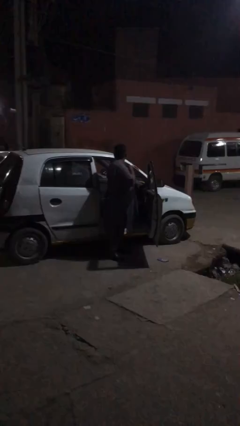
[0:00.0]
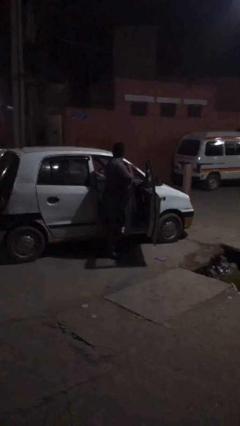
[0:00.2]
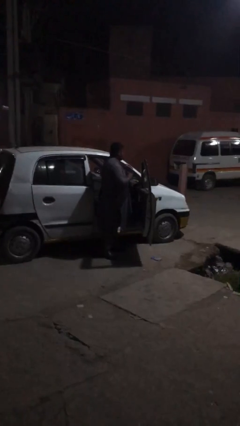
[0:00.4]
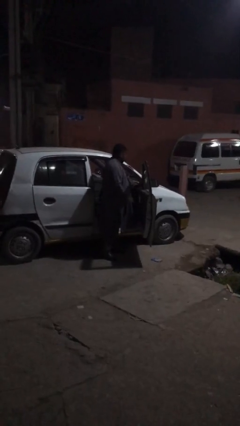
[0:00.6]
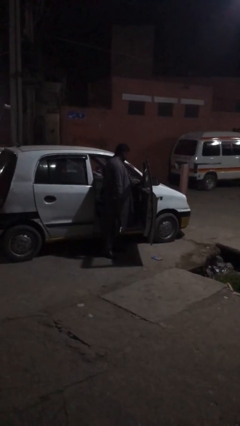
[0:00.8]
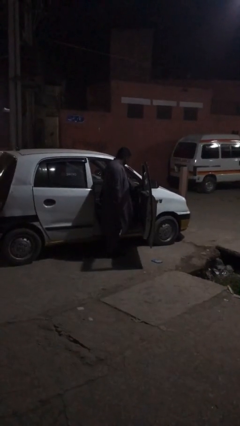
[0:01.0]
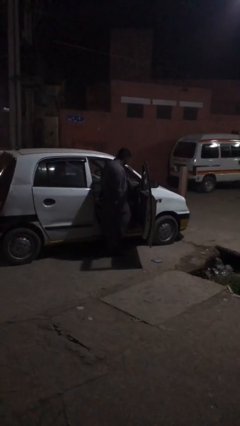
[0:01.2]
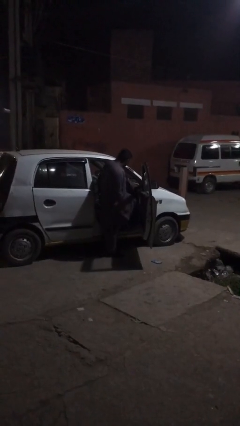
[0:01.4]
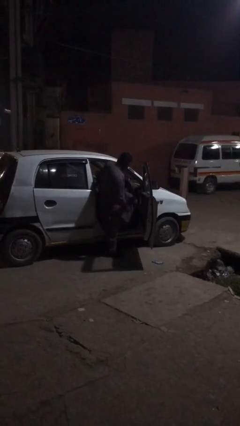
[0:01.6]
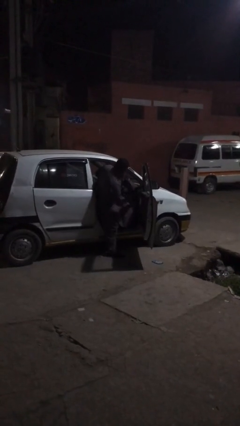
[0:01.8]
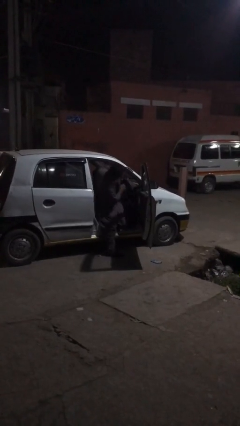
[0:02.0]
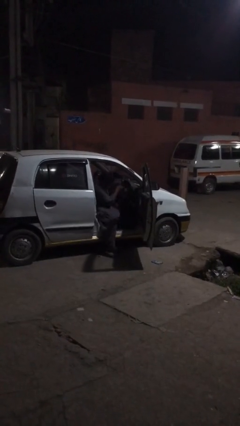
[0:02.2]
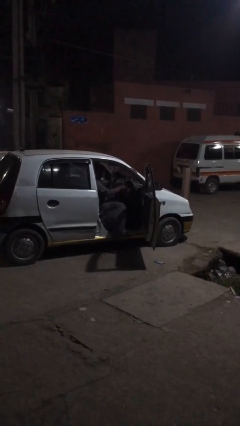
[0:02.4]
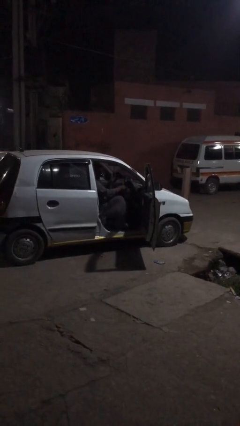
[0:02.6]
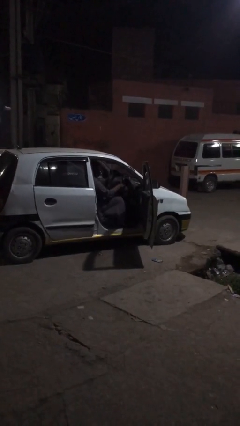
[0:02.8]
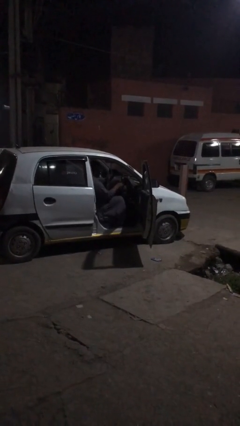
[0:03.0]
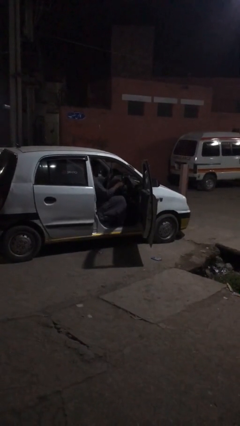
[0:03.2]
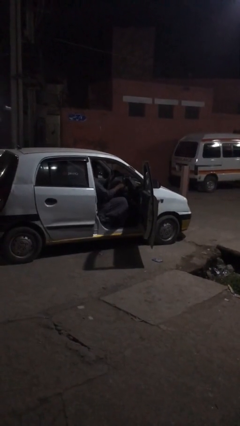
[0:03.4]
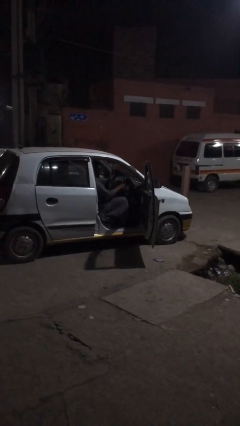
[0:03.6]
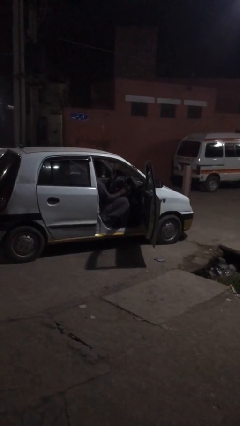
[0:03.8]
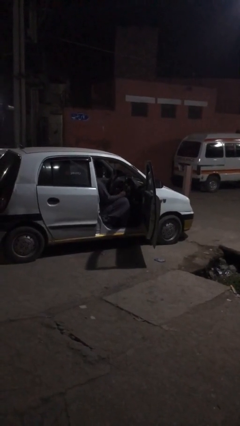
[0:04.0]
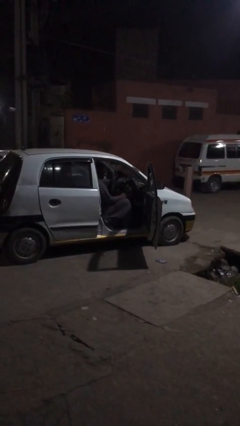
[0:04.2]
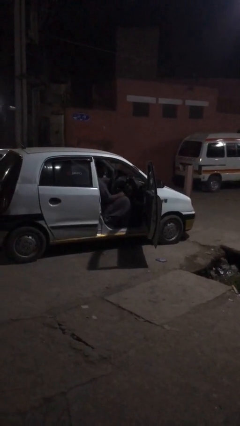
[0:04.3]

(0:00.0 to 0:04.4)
person enters car

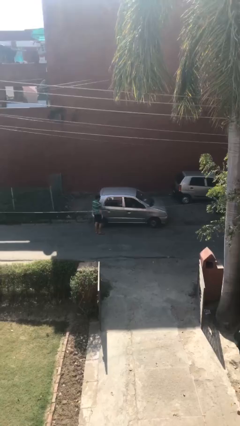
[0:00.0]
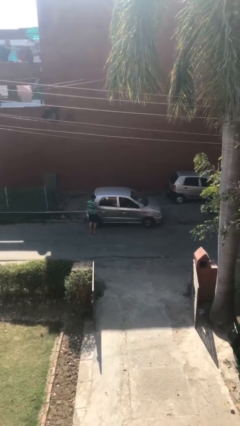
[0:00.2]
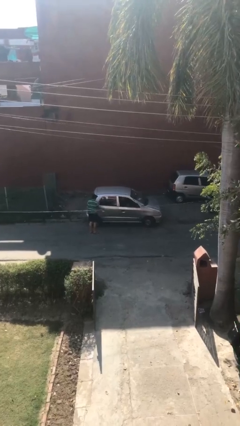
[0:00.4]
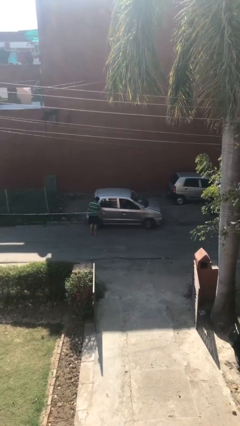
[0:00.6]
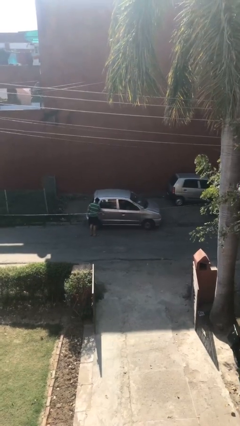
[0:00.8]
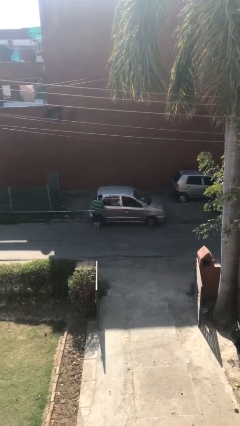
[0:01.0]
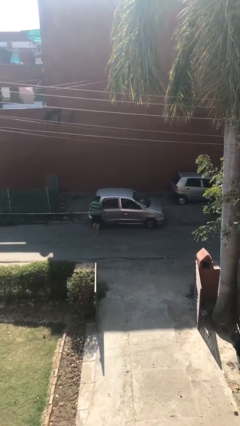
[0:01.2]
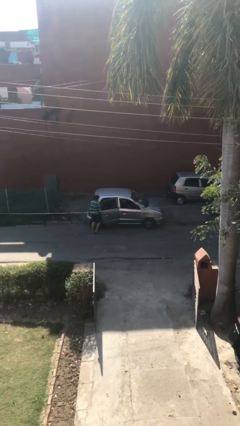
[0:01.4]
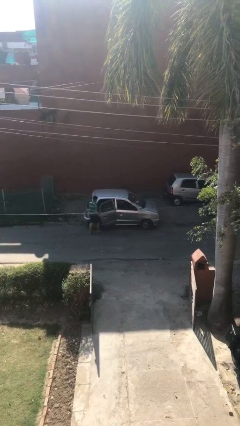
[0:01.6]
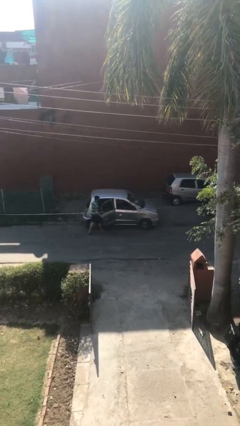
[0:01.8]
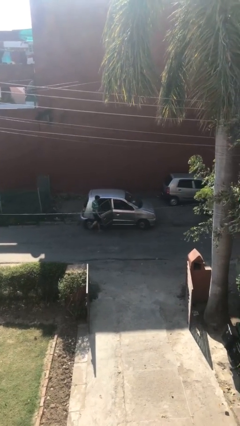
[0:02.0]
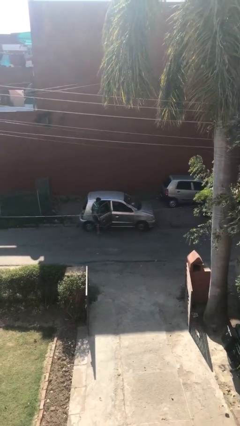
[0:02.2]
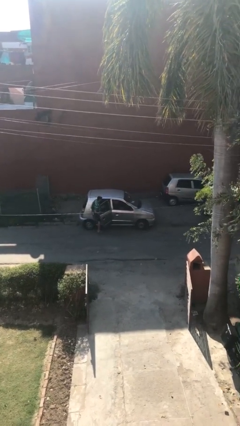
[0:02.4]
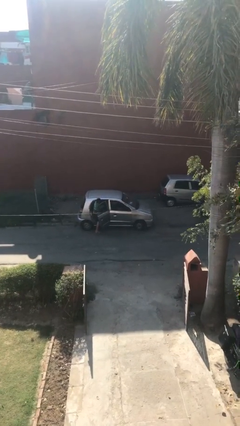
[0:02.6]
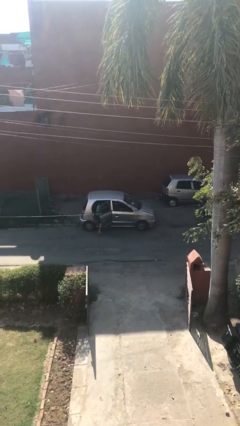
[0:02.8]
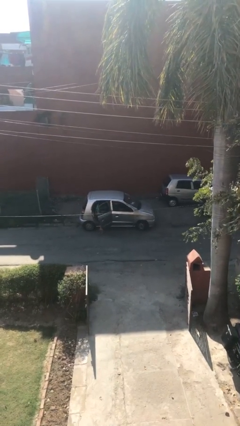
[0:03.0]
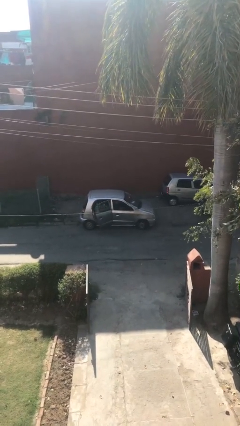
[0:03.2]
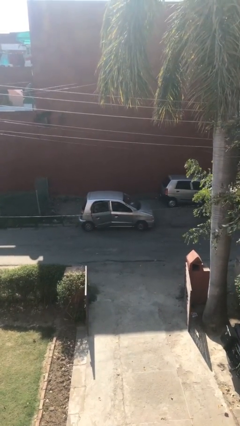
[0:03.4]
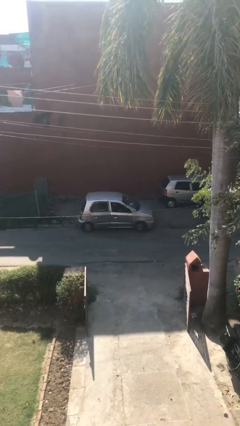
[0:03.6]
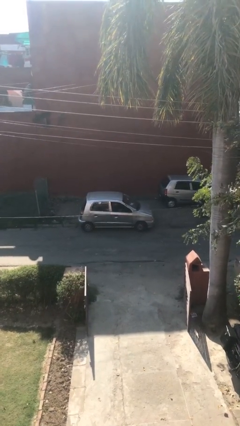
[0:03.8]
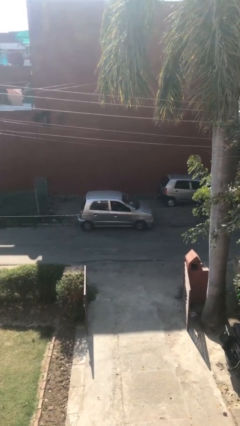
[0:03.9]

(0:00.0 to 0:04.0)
car picks up person

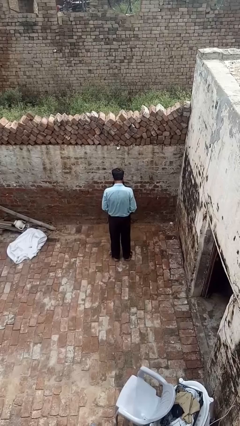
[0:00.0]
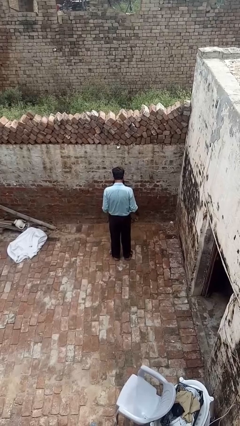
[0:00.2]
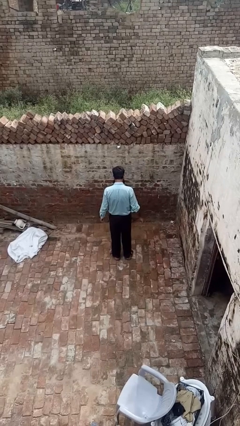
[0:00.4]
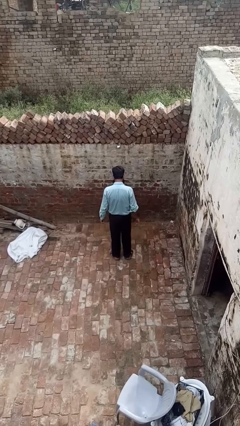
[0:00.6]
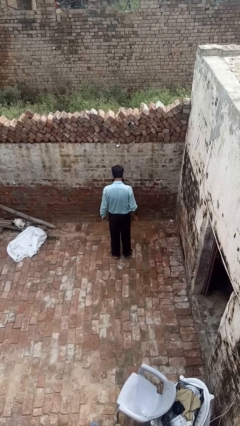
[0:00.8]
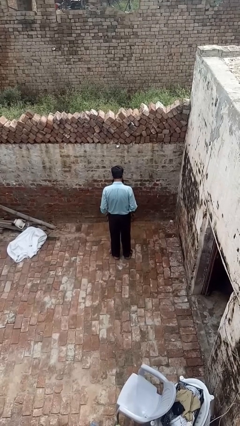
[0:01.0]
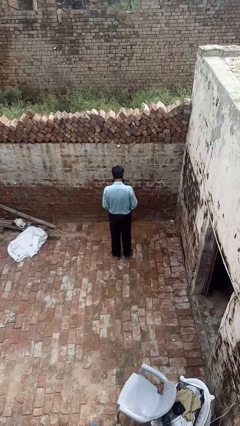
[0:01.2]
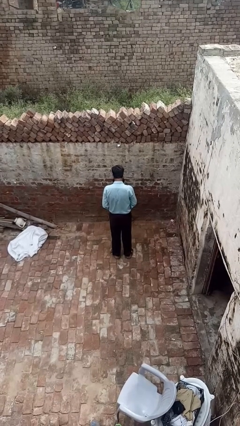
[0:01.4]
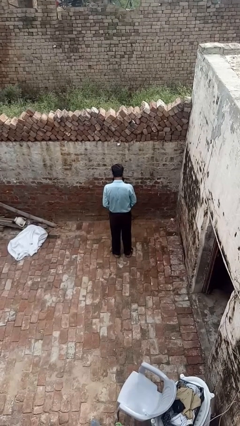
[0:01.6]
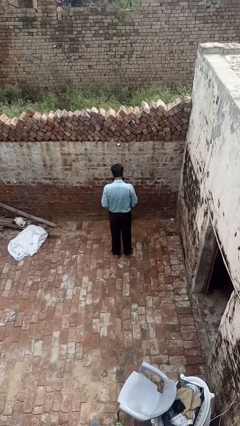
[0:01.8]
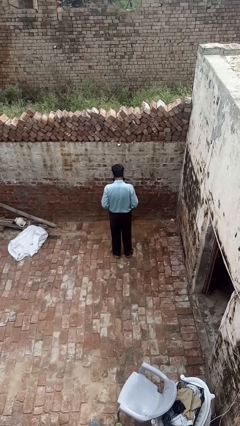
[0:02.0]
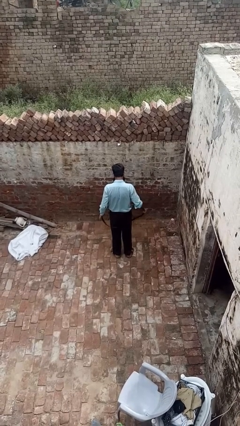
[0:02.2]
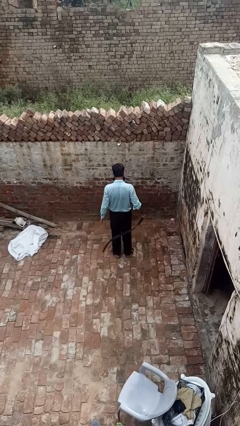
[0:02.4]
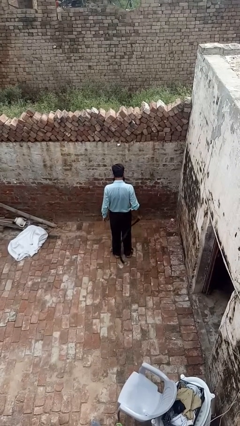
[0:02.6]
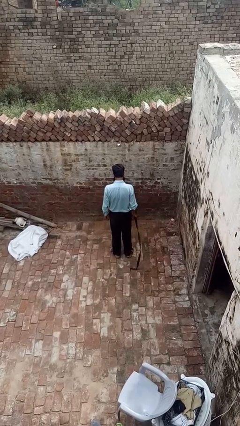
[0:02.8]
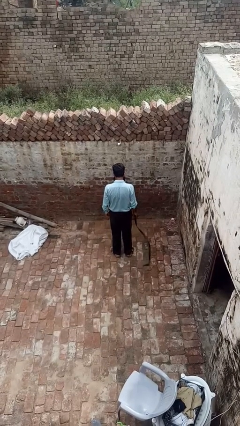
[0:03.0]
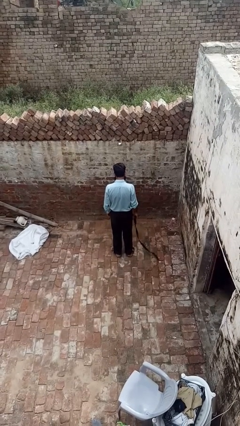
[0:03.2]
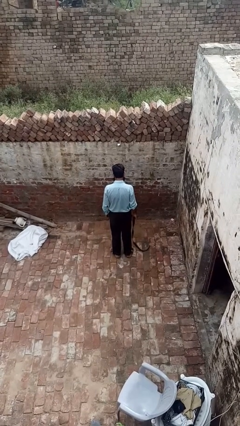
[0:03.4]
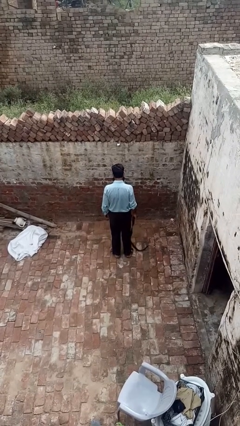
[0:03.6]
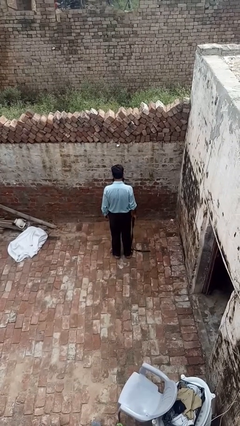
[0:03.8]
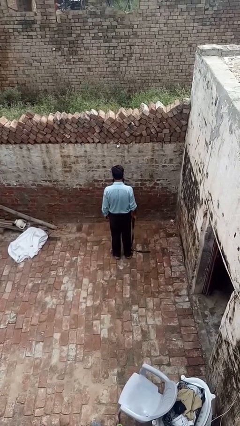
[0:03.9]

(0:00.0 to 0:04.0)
person takes off belt

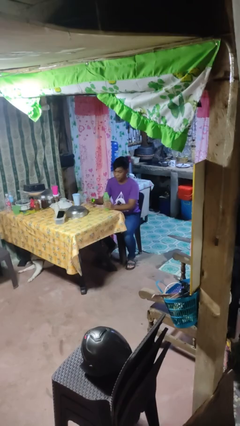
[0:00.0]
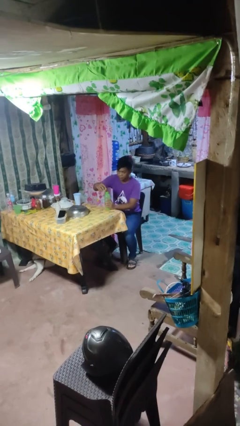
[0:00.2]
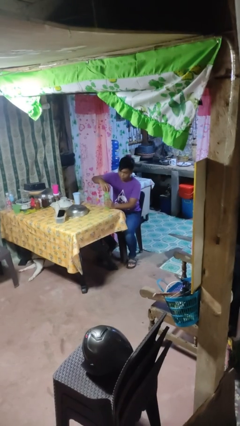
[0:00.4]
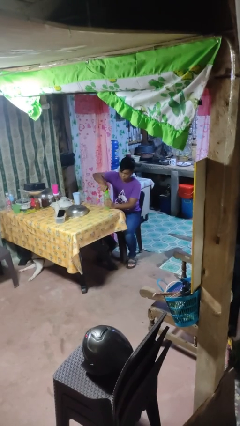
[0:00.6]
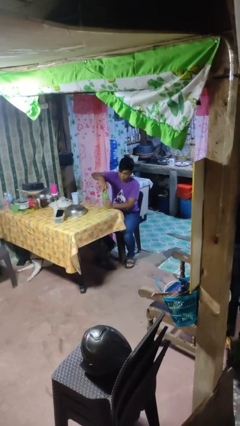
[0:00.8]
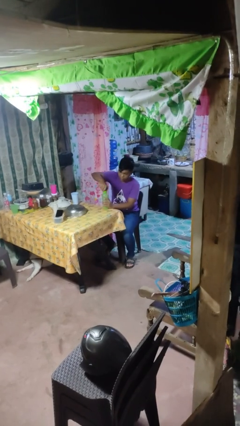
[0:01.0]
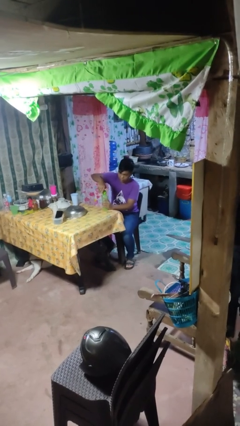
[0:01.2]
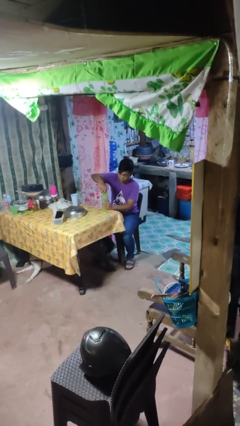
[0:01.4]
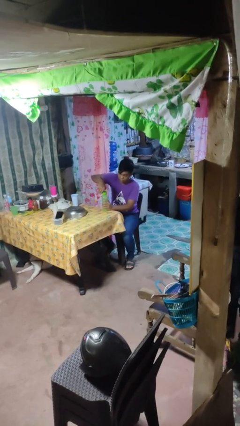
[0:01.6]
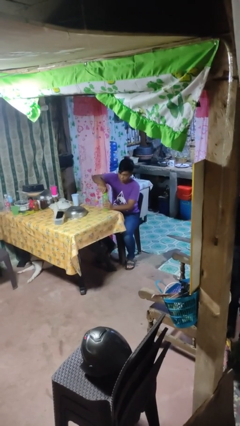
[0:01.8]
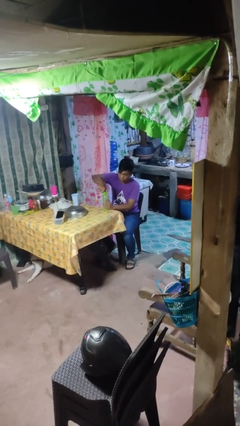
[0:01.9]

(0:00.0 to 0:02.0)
person screws lid to bottle

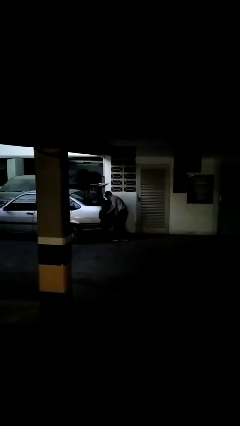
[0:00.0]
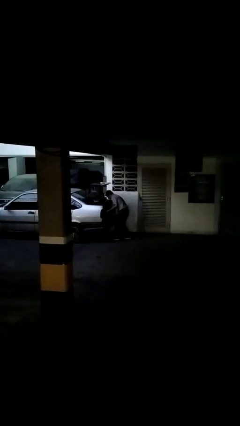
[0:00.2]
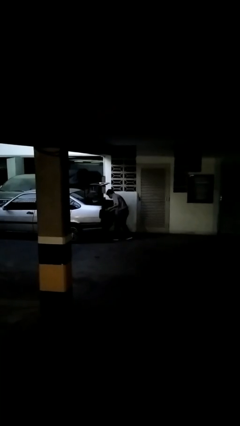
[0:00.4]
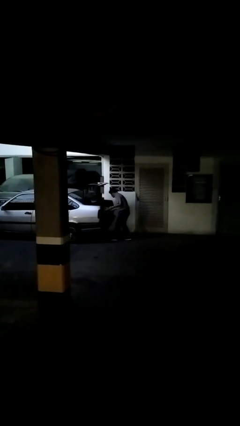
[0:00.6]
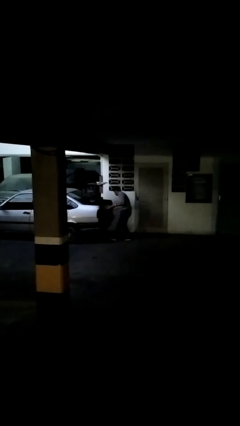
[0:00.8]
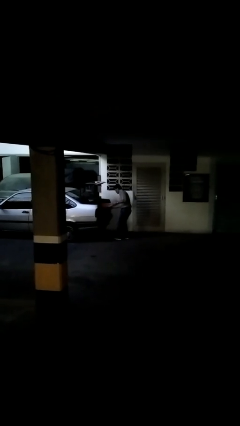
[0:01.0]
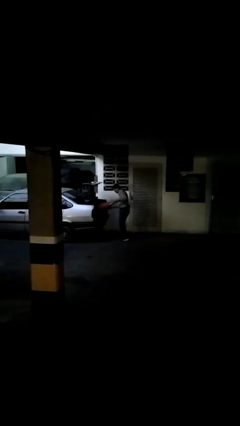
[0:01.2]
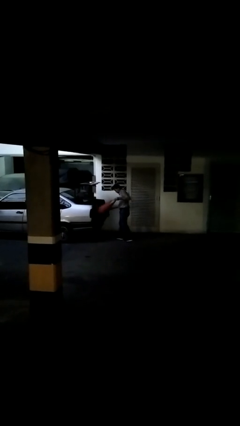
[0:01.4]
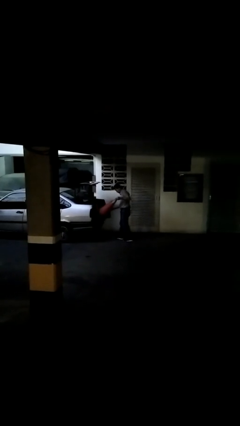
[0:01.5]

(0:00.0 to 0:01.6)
person unloads car

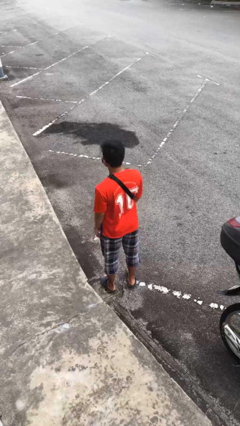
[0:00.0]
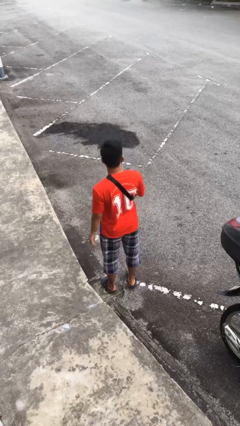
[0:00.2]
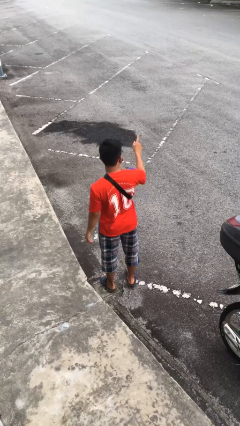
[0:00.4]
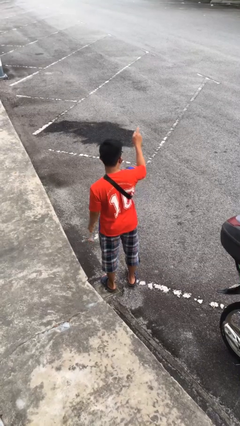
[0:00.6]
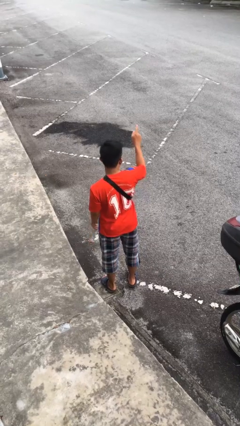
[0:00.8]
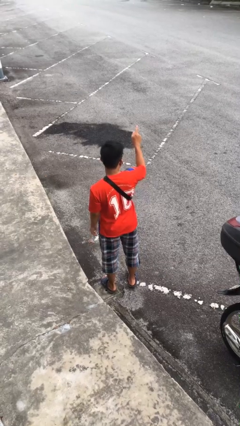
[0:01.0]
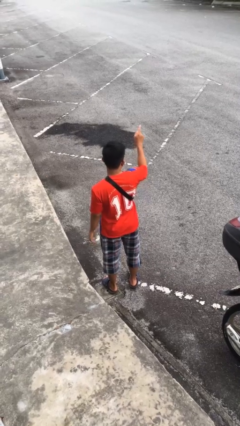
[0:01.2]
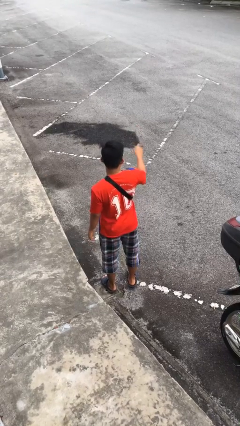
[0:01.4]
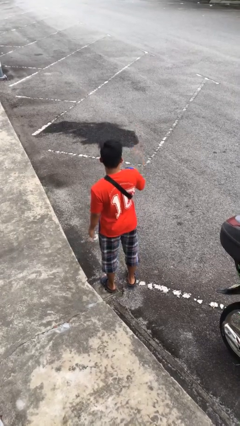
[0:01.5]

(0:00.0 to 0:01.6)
person points at person
